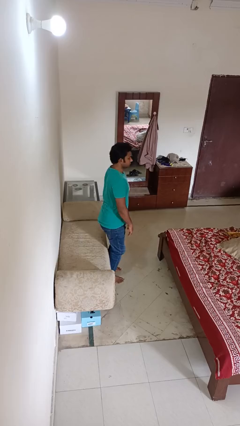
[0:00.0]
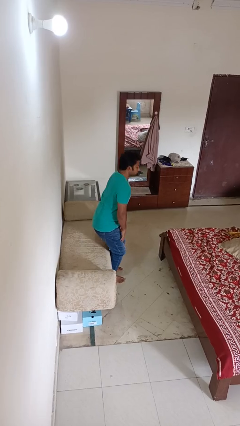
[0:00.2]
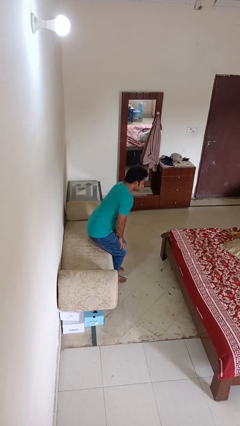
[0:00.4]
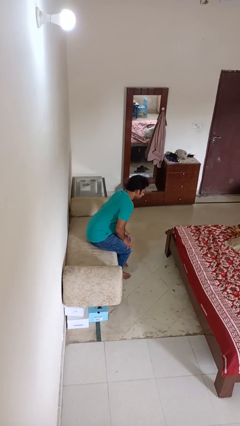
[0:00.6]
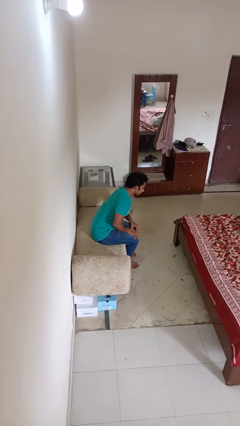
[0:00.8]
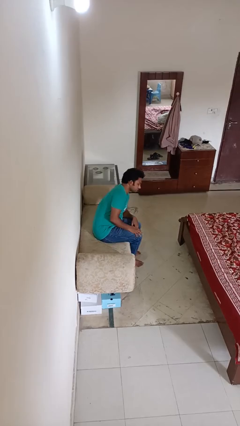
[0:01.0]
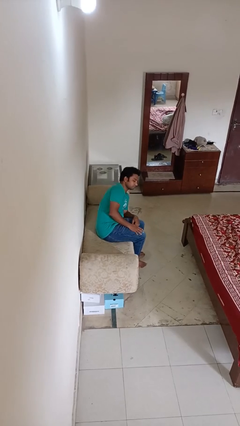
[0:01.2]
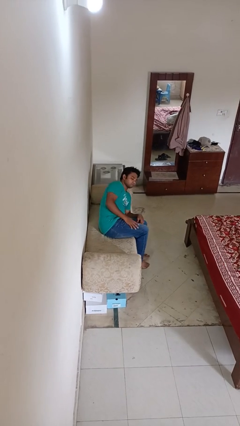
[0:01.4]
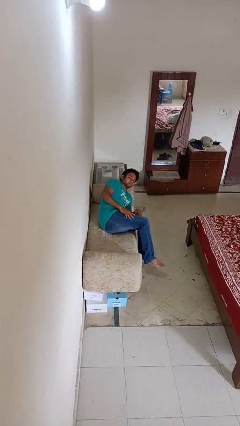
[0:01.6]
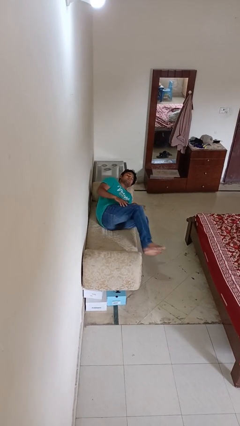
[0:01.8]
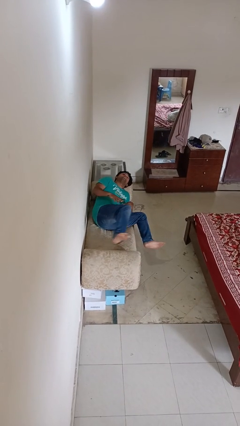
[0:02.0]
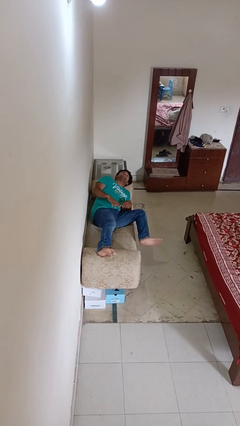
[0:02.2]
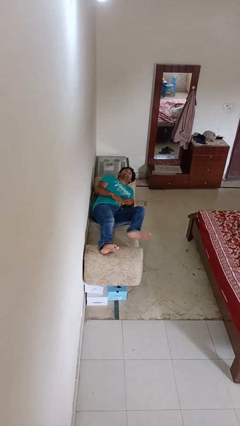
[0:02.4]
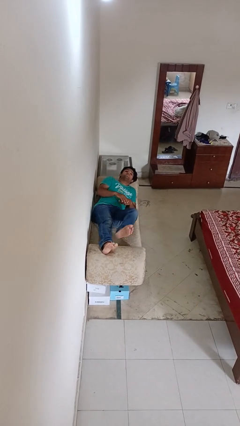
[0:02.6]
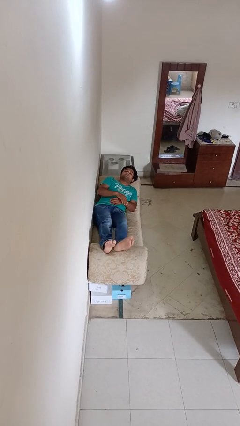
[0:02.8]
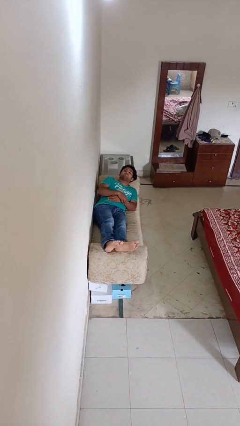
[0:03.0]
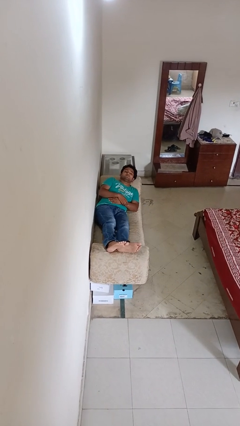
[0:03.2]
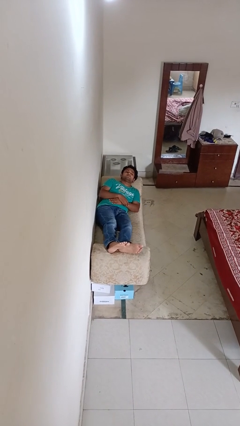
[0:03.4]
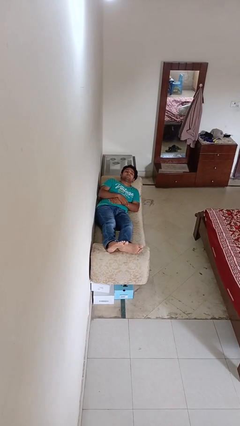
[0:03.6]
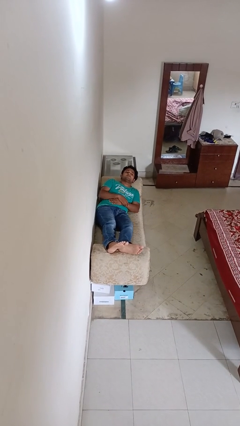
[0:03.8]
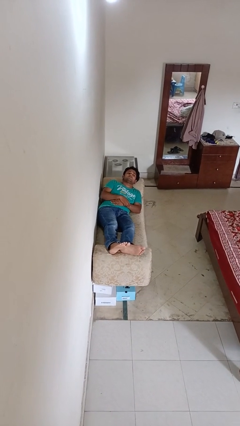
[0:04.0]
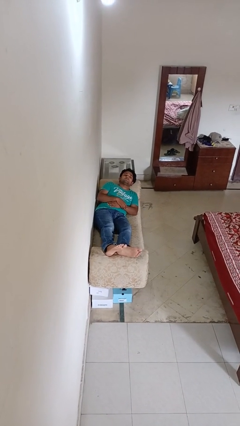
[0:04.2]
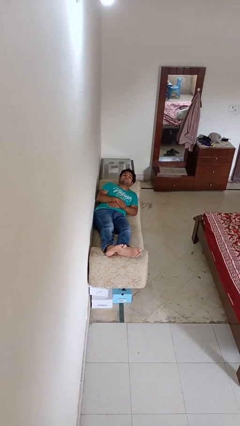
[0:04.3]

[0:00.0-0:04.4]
person lies down on couch

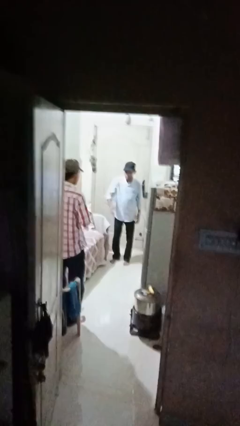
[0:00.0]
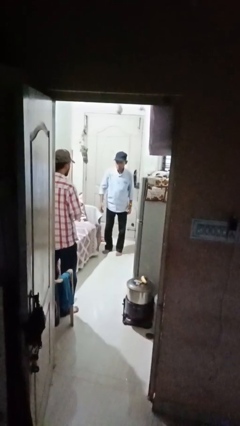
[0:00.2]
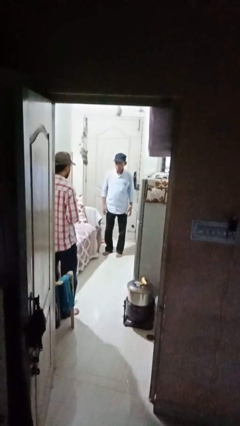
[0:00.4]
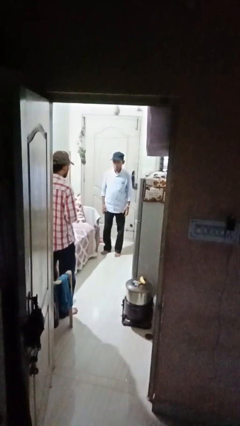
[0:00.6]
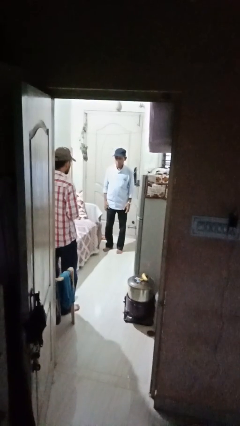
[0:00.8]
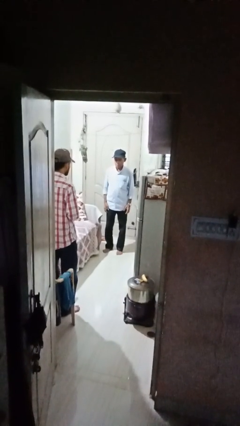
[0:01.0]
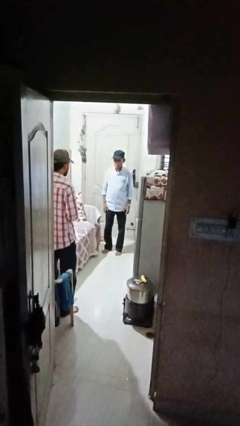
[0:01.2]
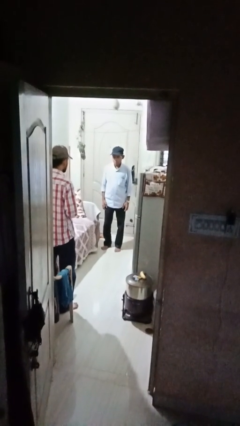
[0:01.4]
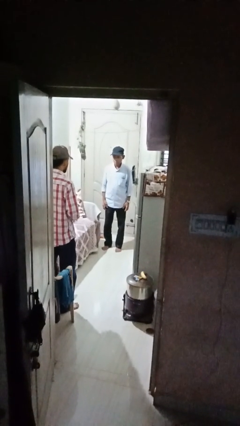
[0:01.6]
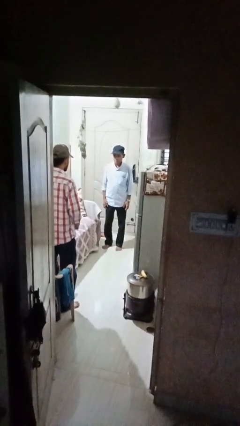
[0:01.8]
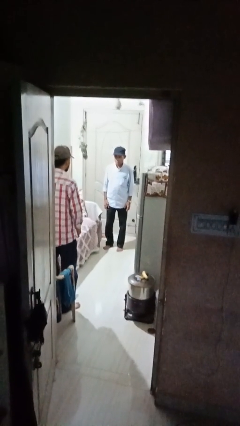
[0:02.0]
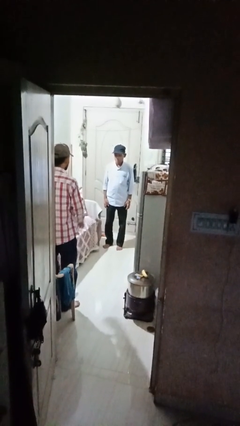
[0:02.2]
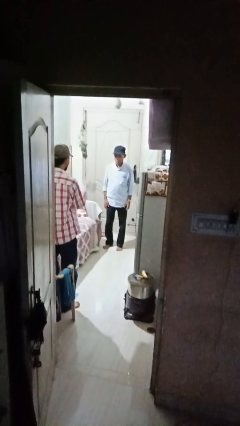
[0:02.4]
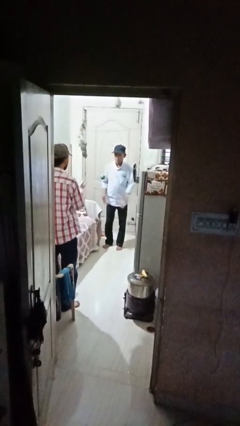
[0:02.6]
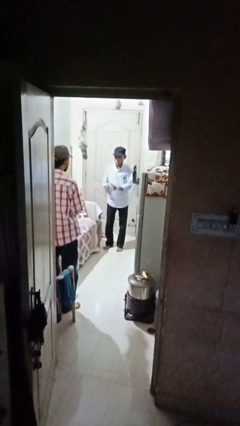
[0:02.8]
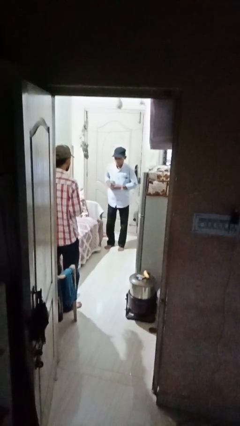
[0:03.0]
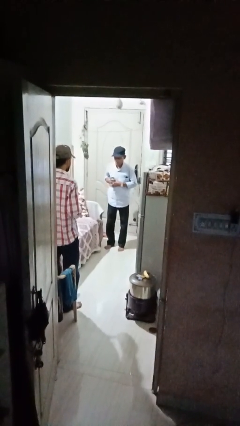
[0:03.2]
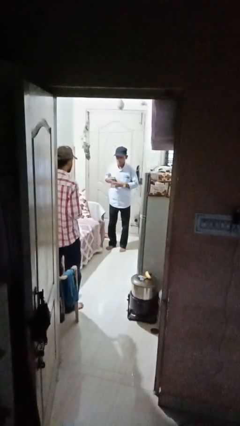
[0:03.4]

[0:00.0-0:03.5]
person throws object to person

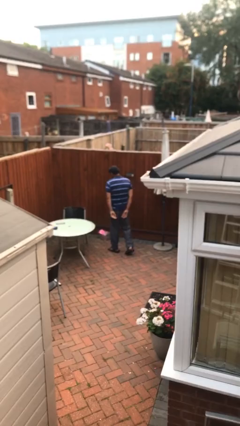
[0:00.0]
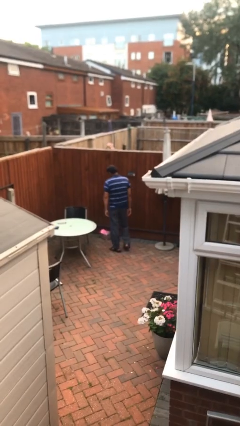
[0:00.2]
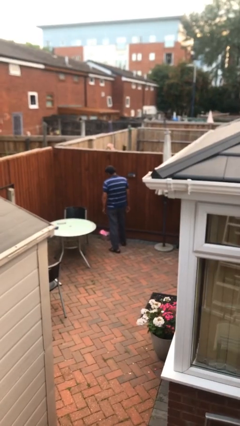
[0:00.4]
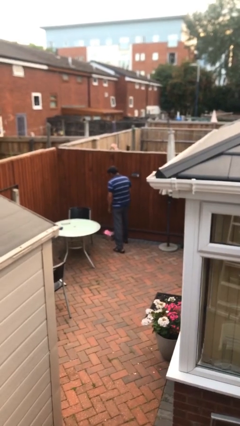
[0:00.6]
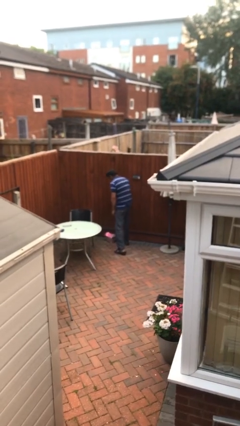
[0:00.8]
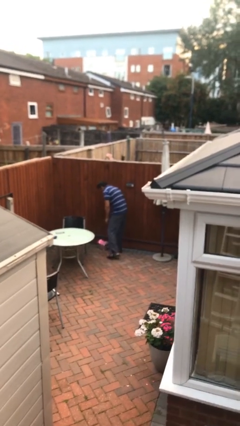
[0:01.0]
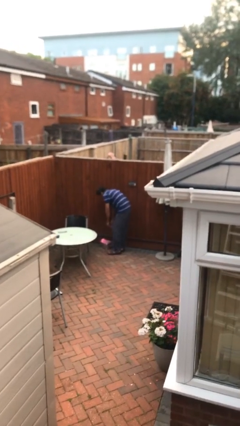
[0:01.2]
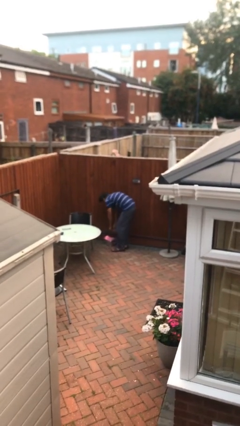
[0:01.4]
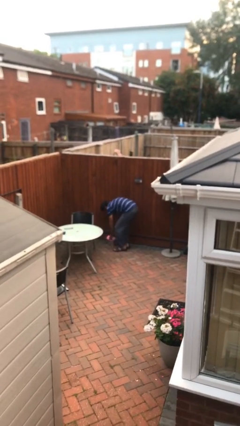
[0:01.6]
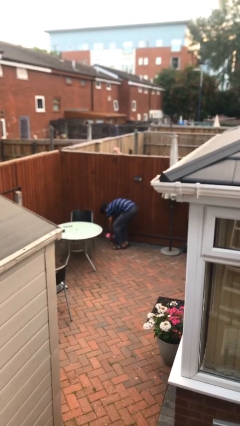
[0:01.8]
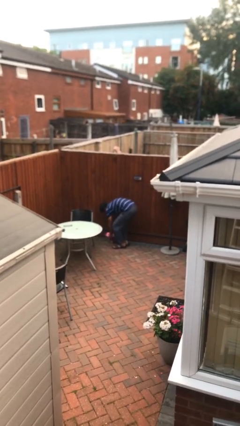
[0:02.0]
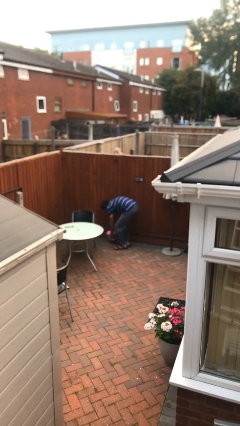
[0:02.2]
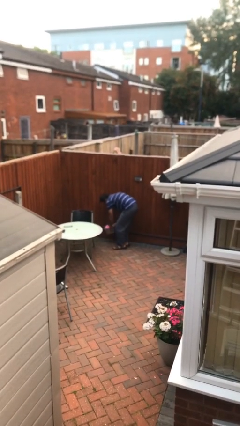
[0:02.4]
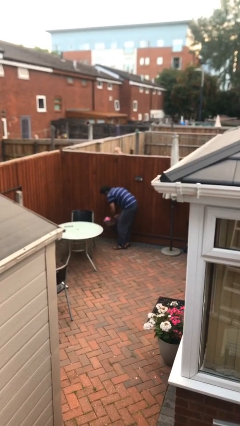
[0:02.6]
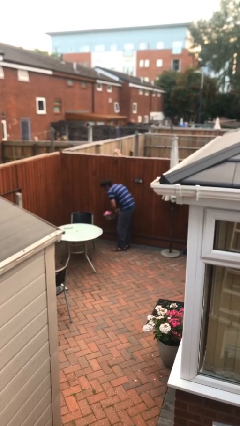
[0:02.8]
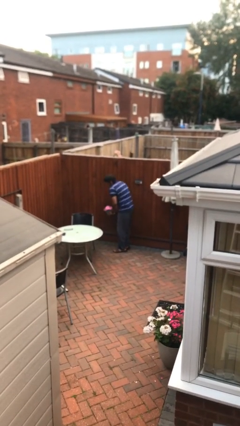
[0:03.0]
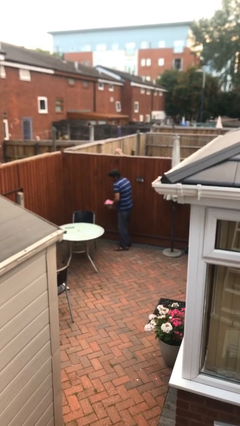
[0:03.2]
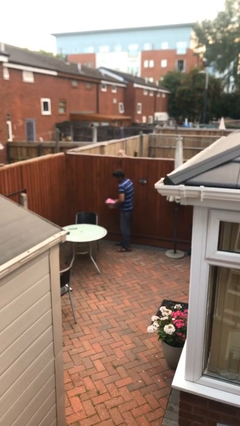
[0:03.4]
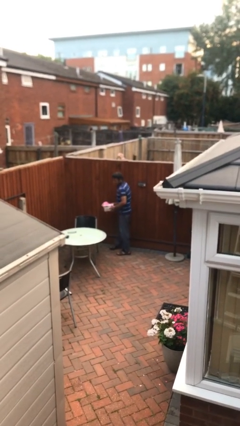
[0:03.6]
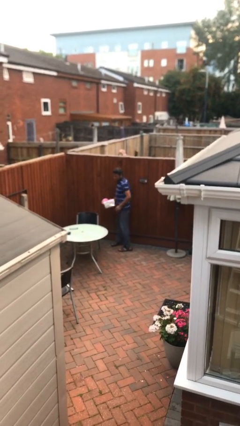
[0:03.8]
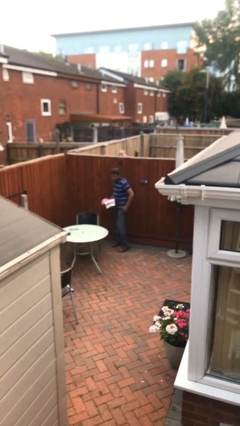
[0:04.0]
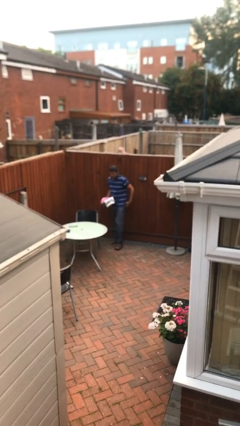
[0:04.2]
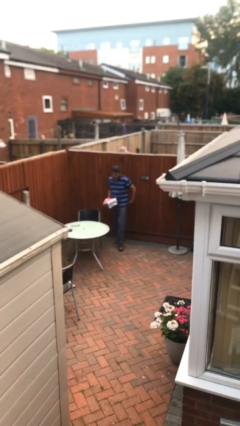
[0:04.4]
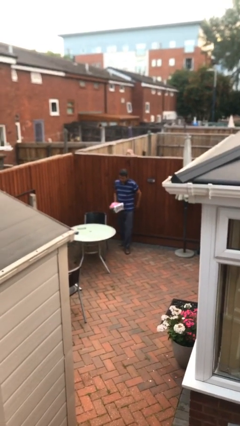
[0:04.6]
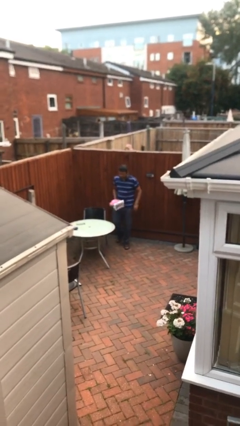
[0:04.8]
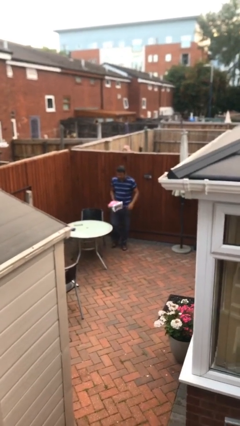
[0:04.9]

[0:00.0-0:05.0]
person picks up object from floor

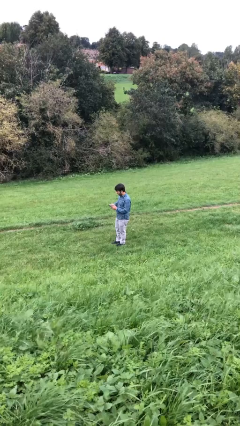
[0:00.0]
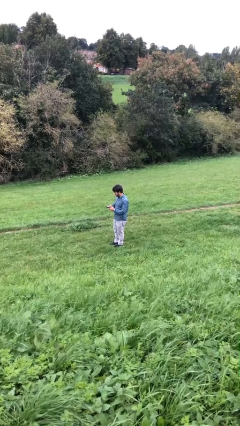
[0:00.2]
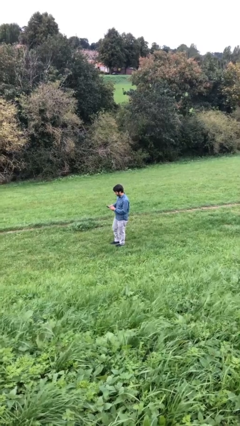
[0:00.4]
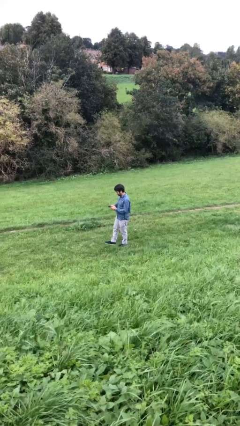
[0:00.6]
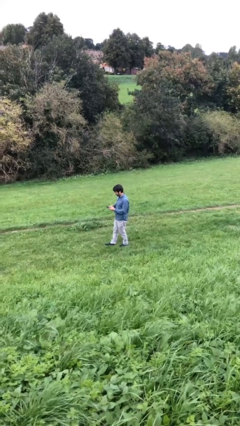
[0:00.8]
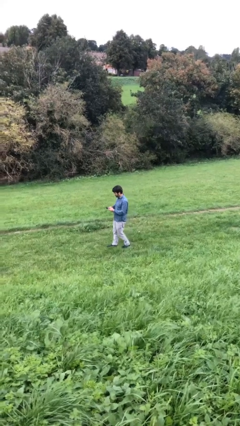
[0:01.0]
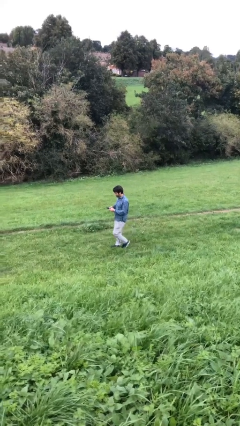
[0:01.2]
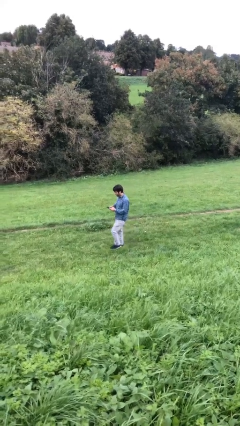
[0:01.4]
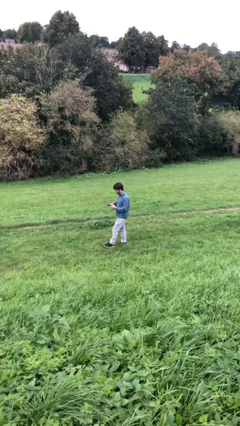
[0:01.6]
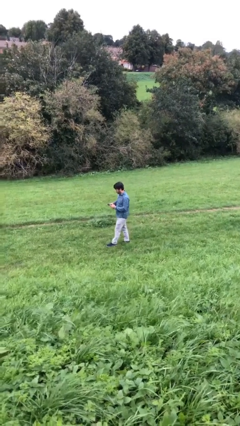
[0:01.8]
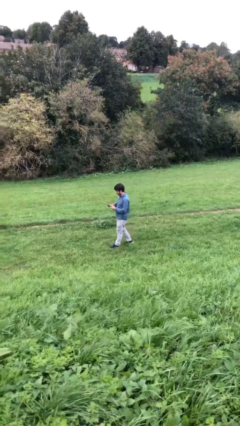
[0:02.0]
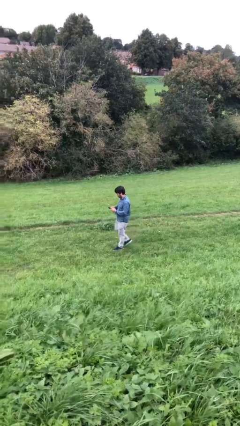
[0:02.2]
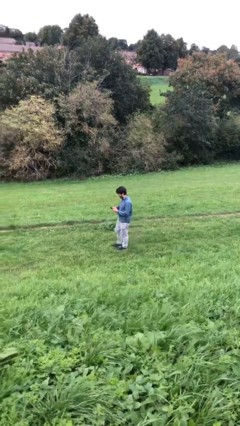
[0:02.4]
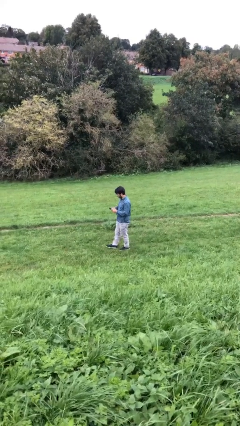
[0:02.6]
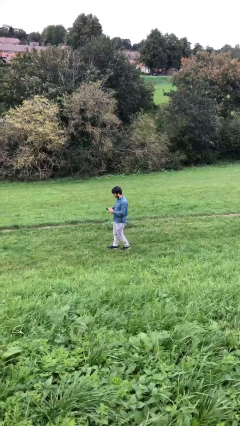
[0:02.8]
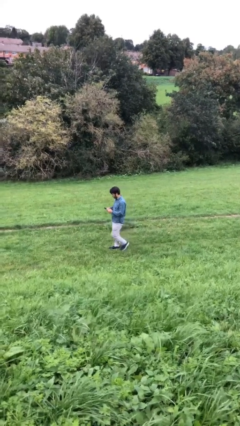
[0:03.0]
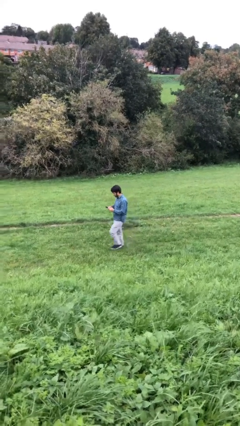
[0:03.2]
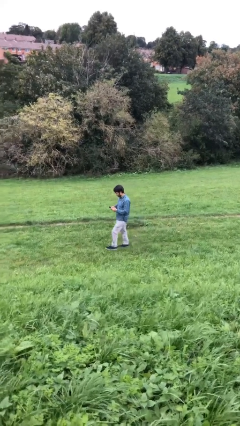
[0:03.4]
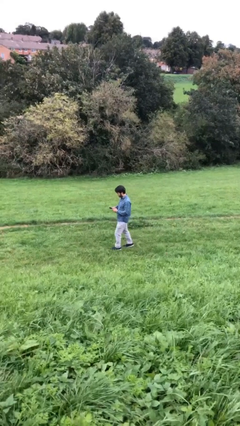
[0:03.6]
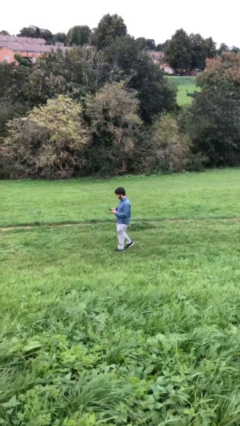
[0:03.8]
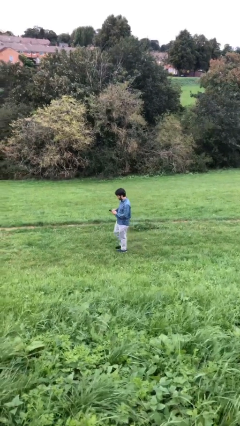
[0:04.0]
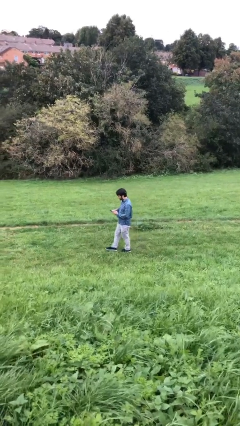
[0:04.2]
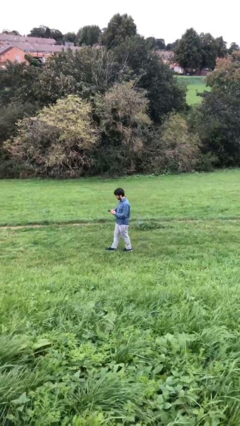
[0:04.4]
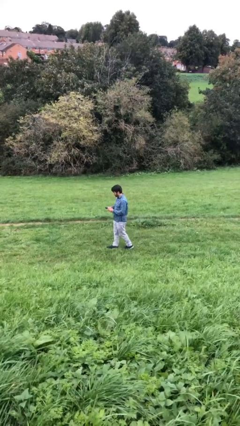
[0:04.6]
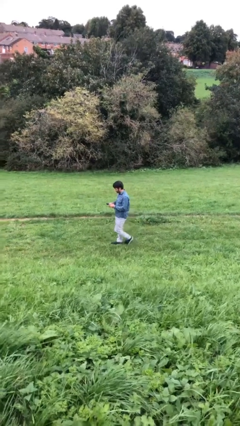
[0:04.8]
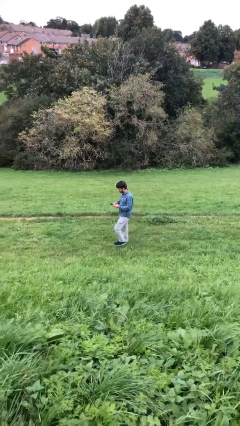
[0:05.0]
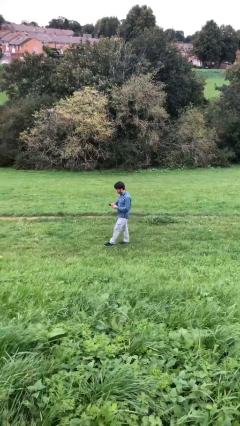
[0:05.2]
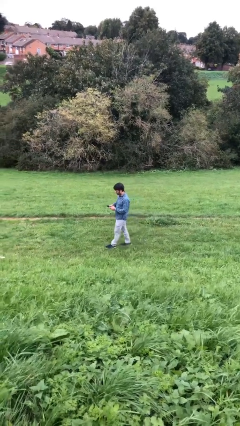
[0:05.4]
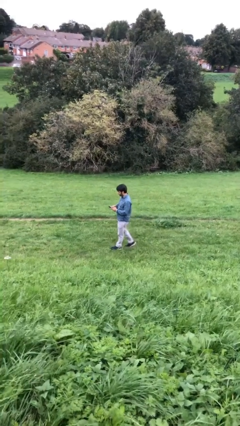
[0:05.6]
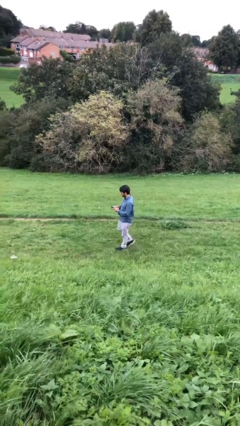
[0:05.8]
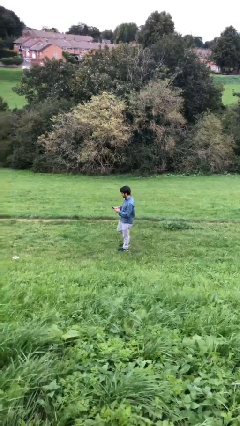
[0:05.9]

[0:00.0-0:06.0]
person texts on phone
